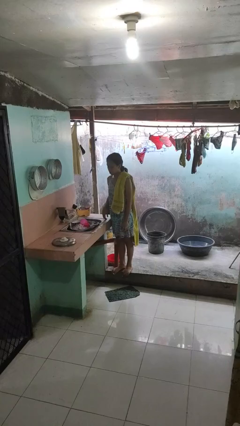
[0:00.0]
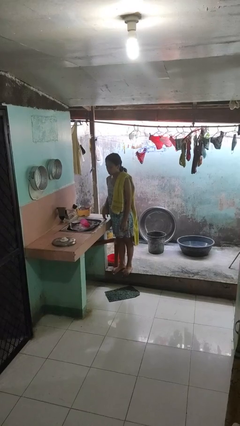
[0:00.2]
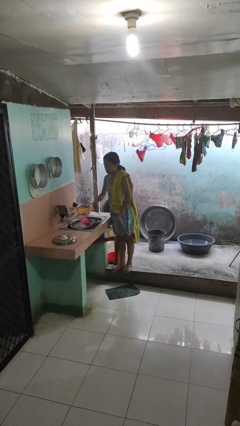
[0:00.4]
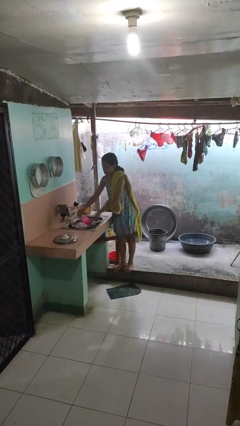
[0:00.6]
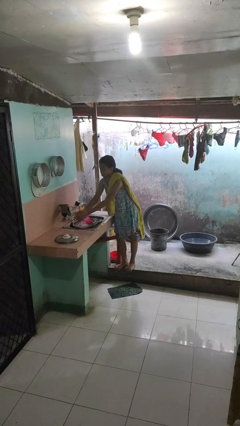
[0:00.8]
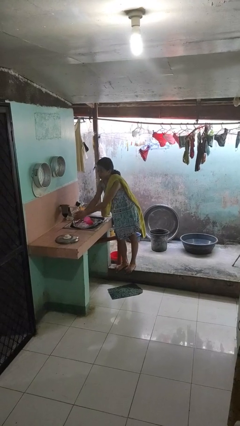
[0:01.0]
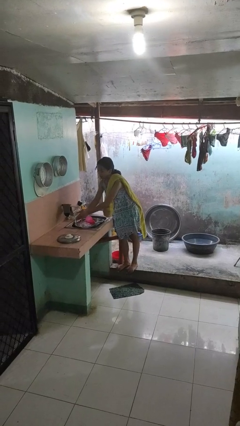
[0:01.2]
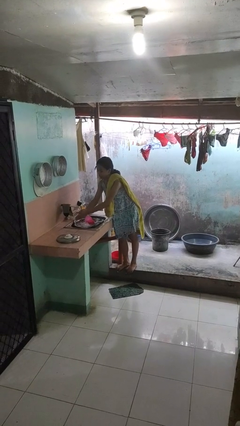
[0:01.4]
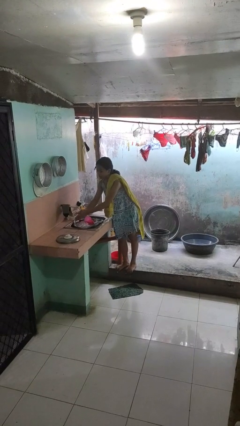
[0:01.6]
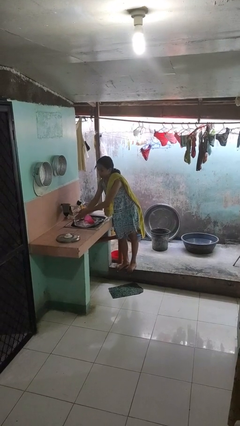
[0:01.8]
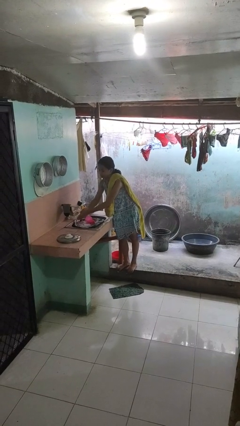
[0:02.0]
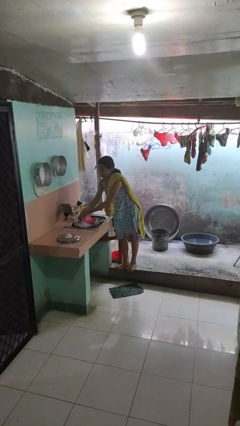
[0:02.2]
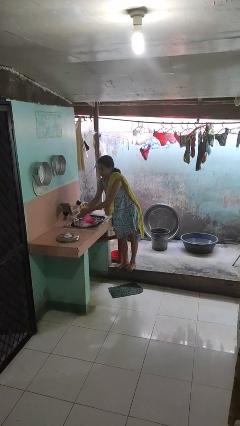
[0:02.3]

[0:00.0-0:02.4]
person washes hands

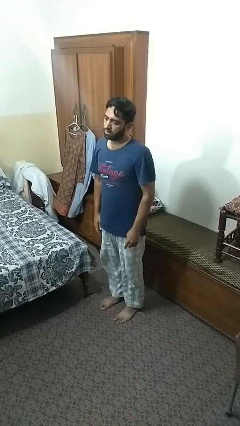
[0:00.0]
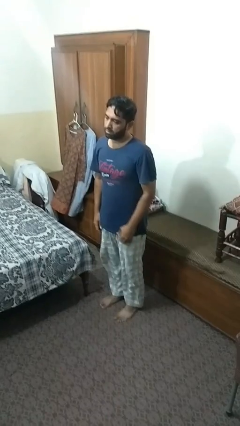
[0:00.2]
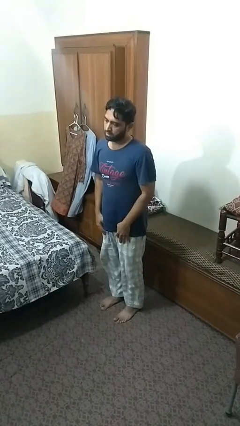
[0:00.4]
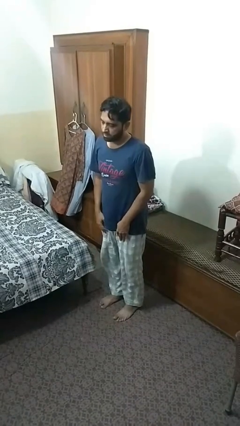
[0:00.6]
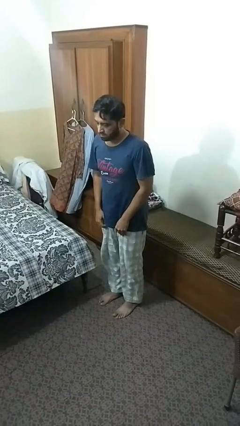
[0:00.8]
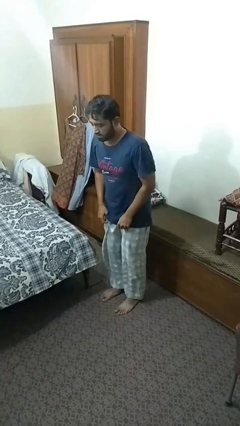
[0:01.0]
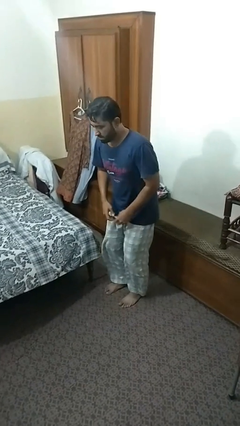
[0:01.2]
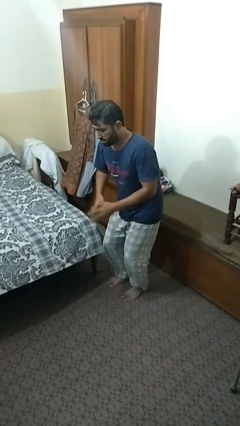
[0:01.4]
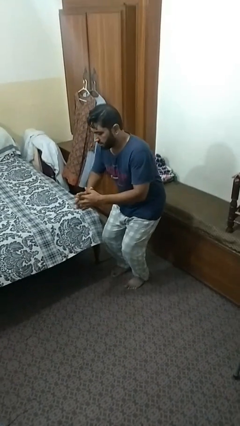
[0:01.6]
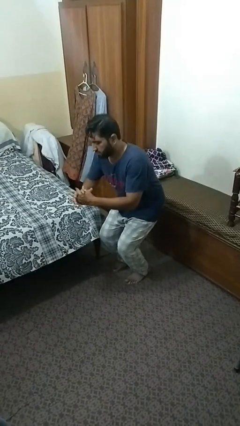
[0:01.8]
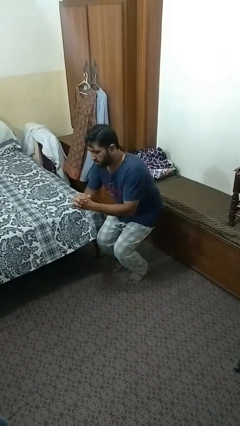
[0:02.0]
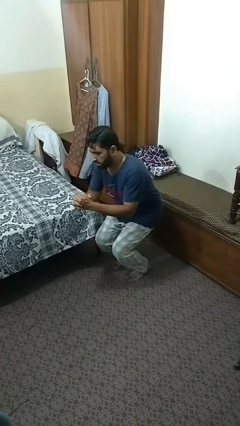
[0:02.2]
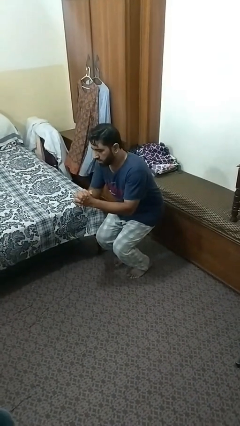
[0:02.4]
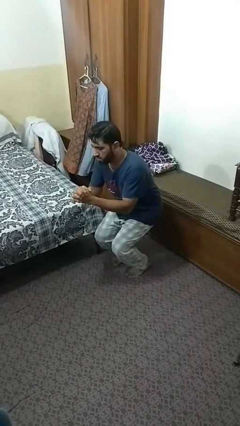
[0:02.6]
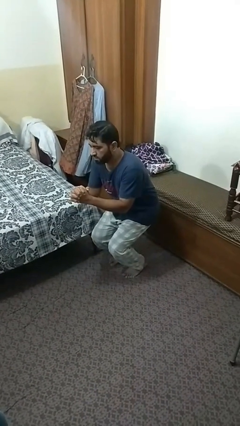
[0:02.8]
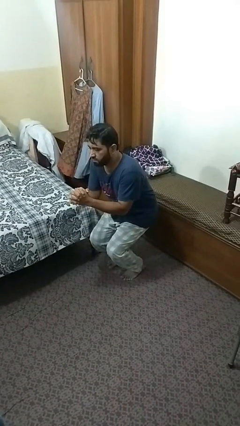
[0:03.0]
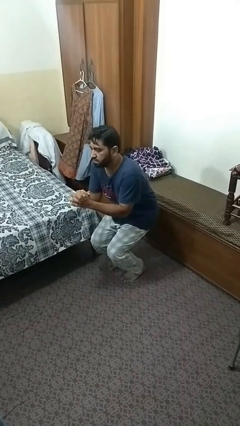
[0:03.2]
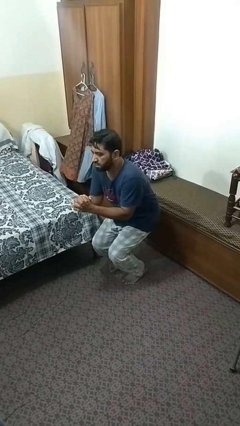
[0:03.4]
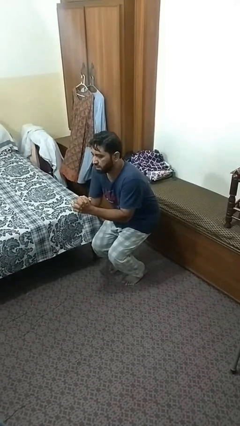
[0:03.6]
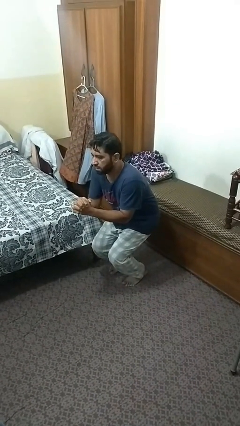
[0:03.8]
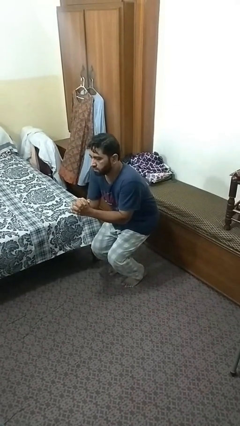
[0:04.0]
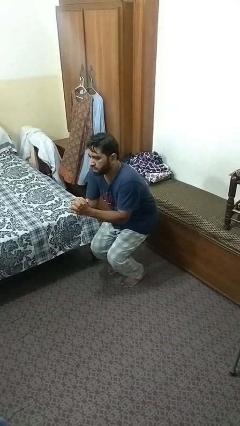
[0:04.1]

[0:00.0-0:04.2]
person squats

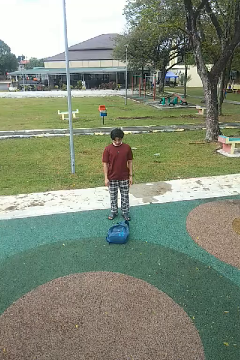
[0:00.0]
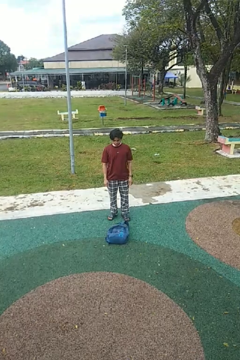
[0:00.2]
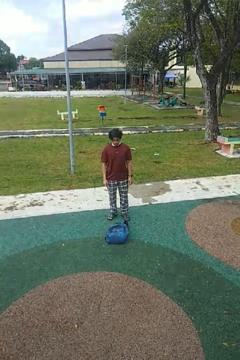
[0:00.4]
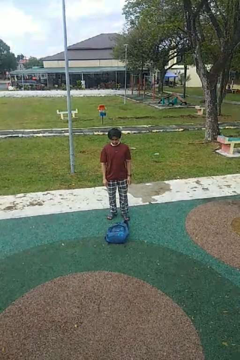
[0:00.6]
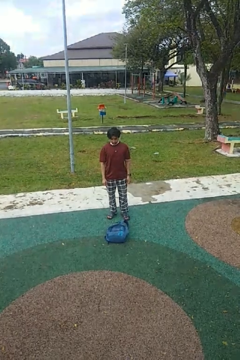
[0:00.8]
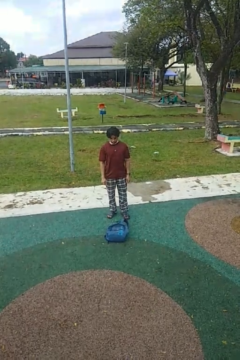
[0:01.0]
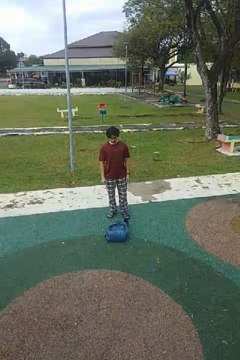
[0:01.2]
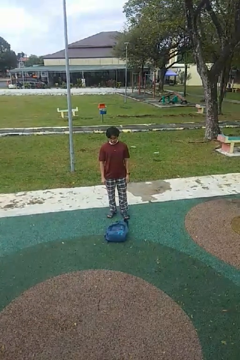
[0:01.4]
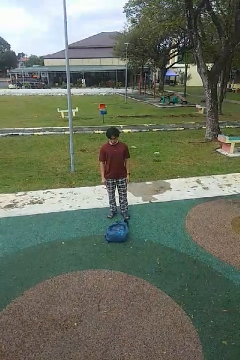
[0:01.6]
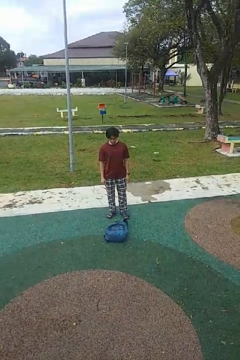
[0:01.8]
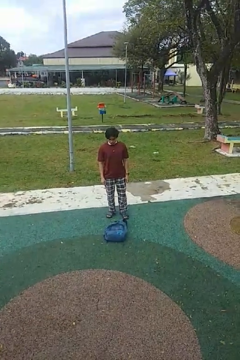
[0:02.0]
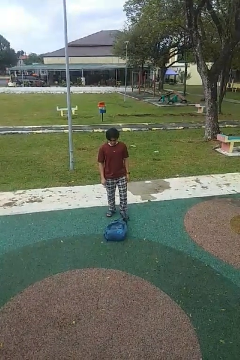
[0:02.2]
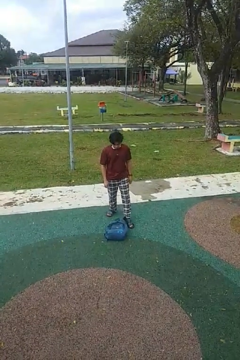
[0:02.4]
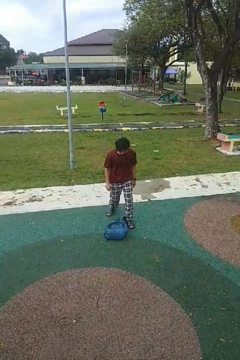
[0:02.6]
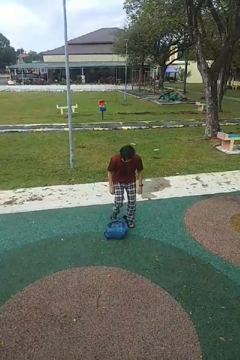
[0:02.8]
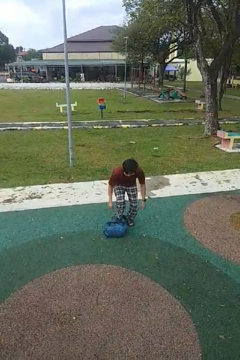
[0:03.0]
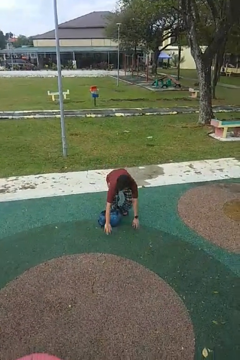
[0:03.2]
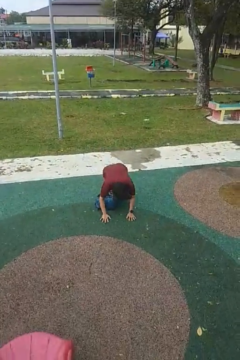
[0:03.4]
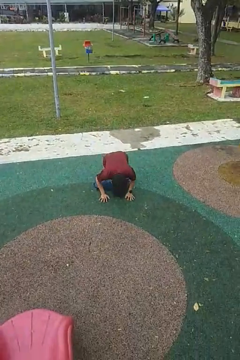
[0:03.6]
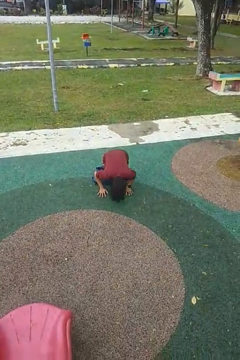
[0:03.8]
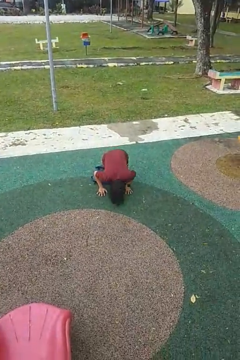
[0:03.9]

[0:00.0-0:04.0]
person trips on object on floor

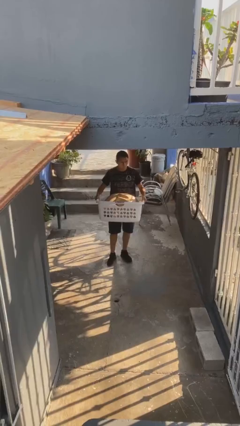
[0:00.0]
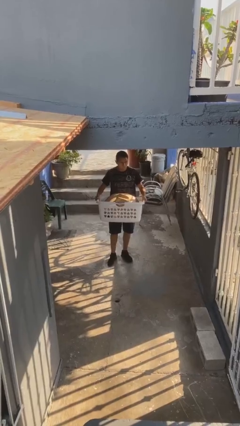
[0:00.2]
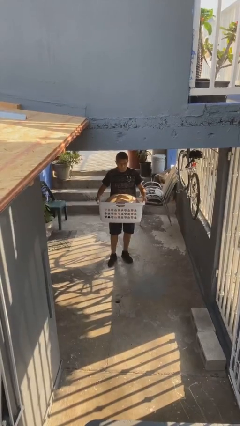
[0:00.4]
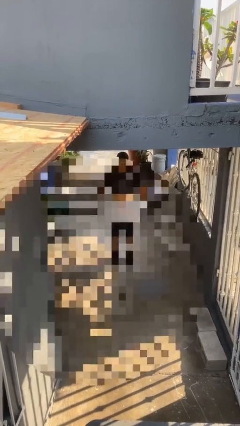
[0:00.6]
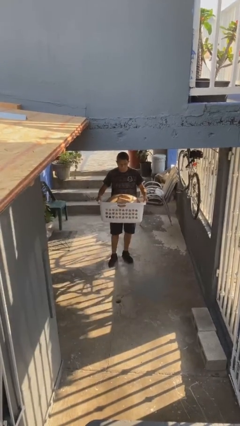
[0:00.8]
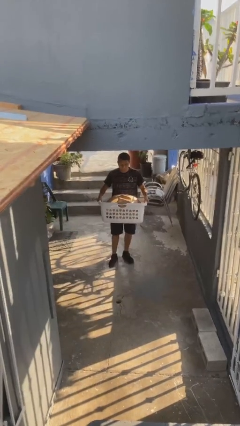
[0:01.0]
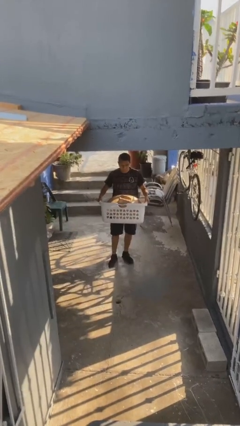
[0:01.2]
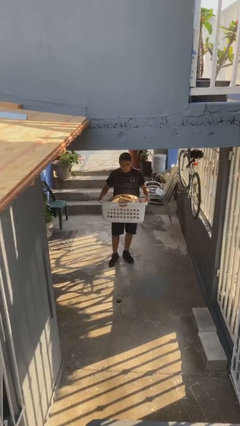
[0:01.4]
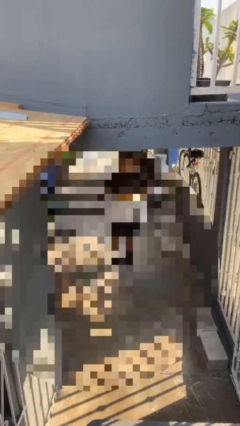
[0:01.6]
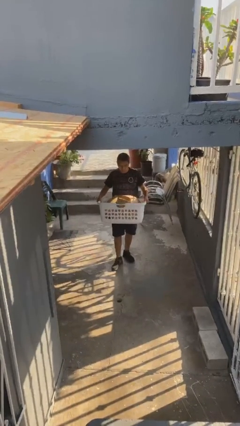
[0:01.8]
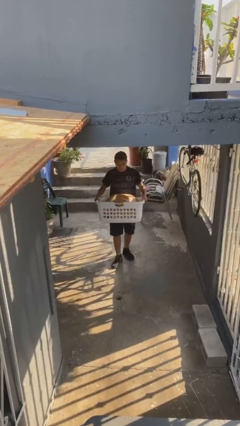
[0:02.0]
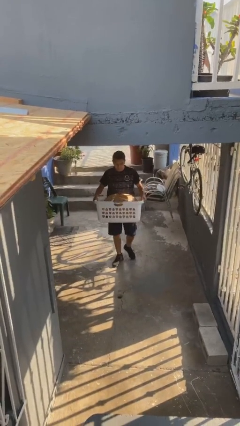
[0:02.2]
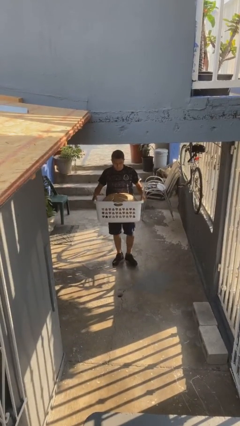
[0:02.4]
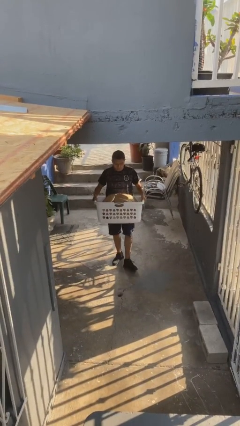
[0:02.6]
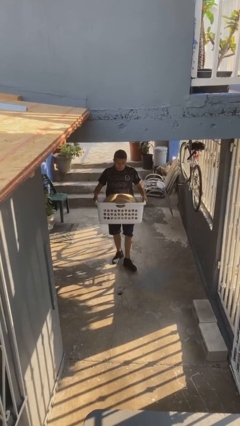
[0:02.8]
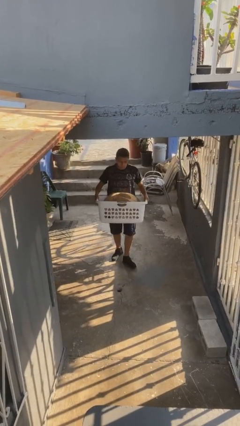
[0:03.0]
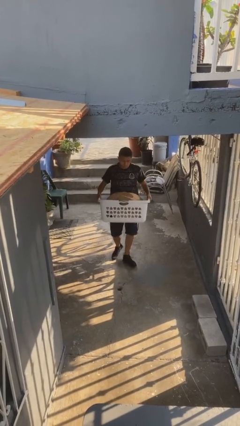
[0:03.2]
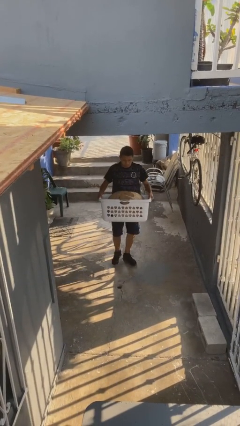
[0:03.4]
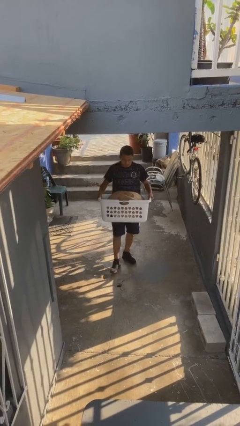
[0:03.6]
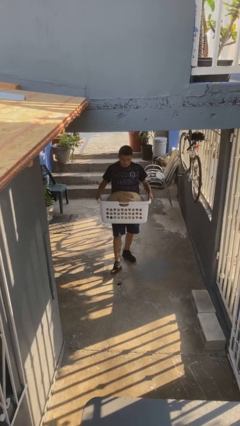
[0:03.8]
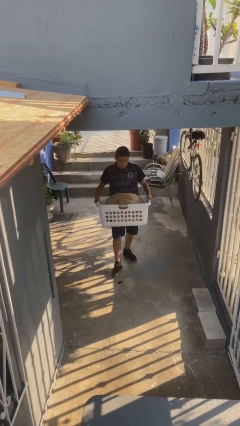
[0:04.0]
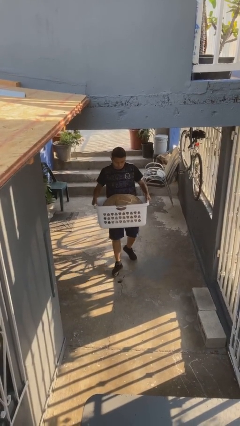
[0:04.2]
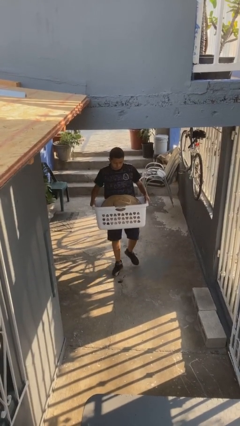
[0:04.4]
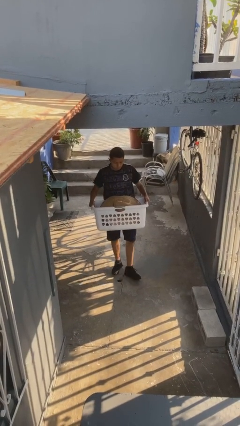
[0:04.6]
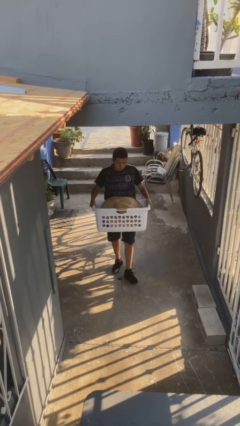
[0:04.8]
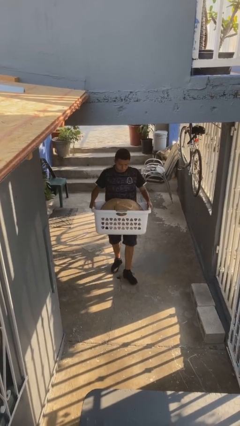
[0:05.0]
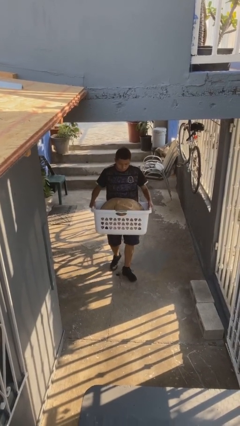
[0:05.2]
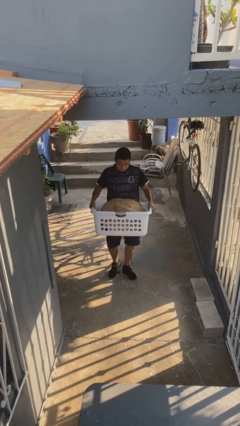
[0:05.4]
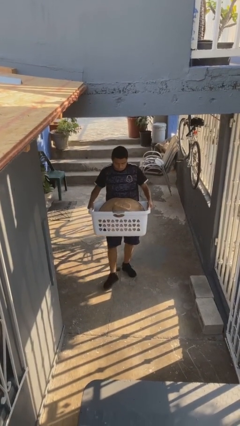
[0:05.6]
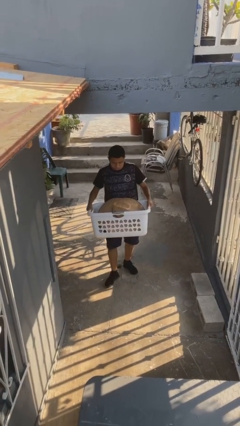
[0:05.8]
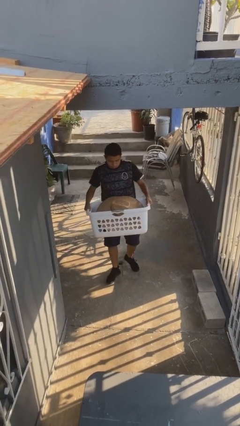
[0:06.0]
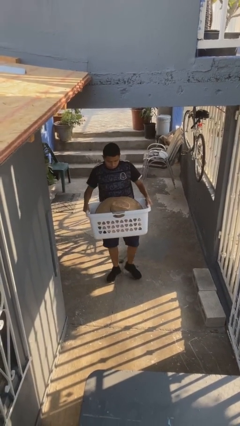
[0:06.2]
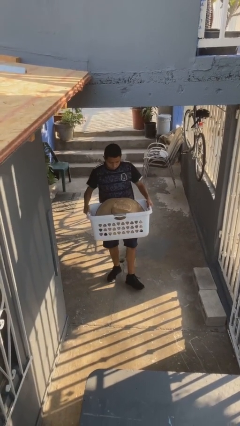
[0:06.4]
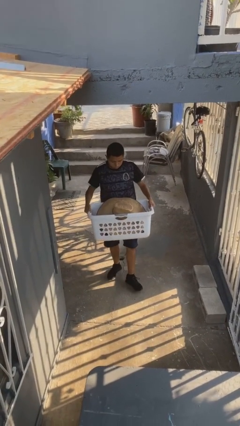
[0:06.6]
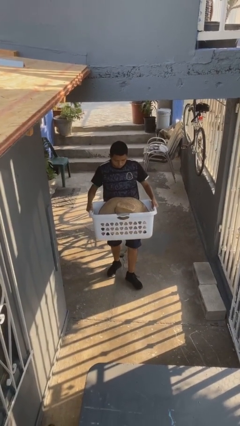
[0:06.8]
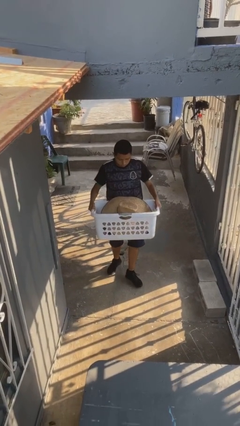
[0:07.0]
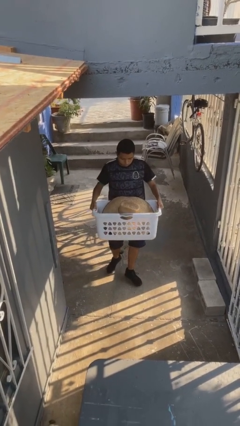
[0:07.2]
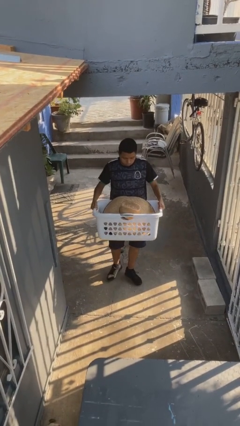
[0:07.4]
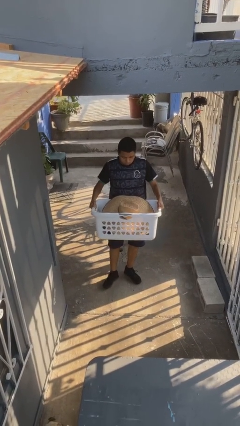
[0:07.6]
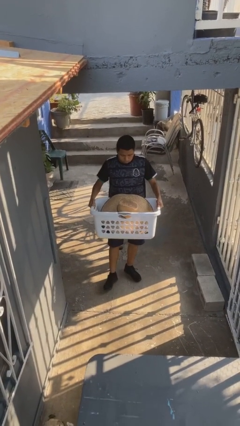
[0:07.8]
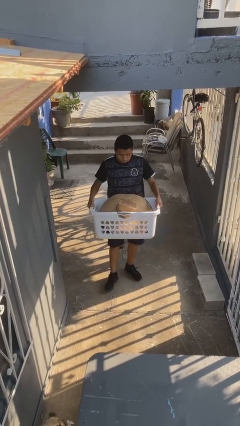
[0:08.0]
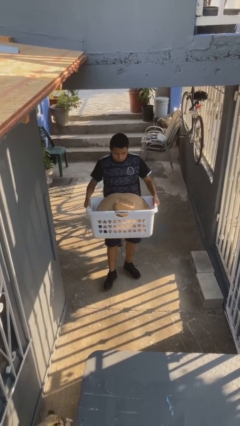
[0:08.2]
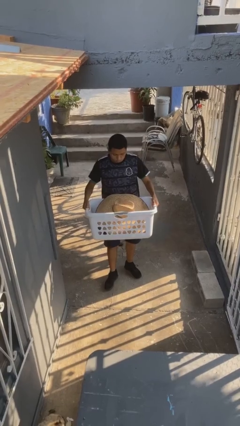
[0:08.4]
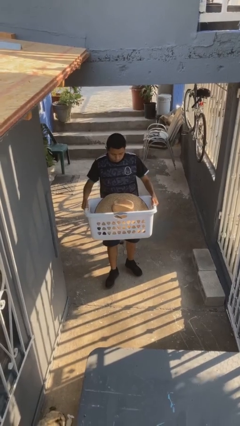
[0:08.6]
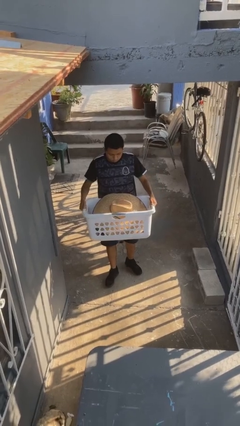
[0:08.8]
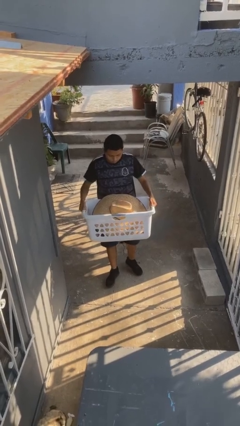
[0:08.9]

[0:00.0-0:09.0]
person carries heavy object
